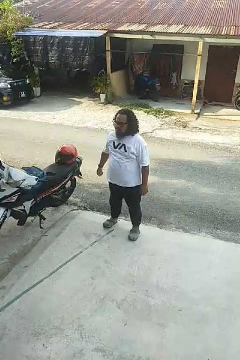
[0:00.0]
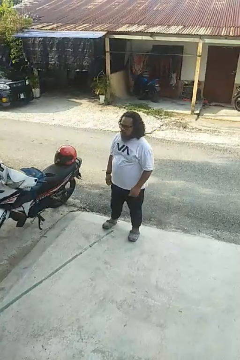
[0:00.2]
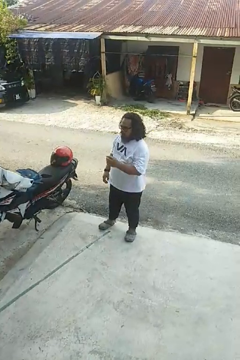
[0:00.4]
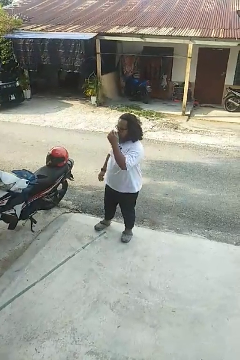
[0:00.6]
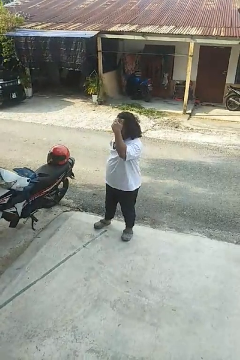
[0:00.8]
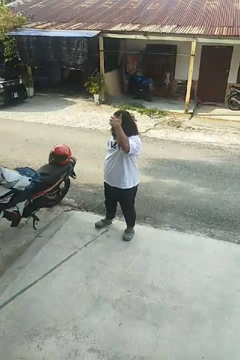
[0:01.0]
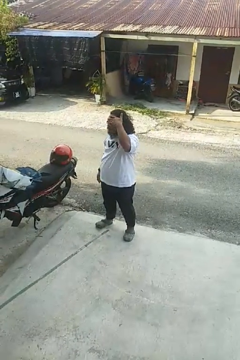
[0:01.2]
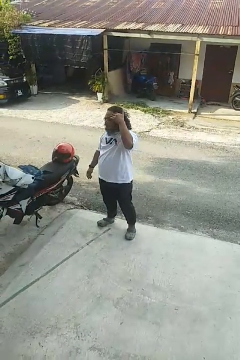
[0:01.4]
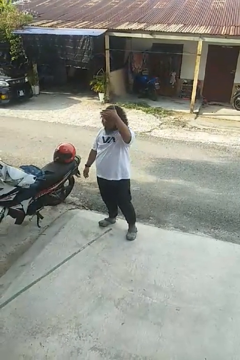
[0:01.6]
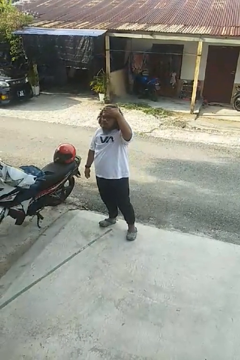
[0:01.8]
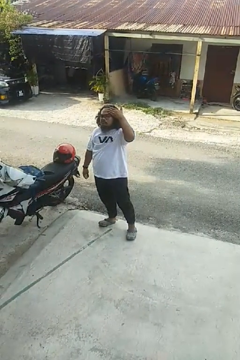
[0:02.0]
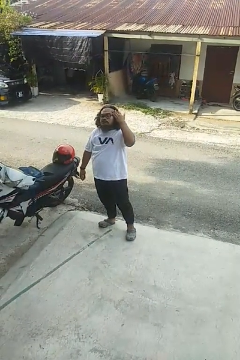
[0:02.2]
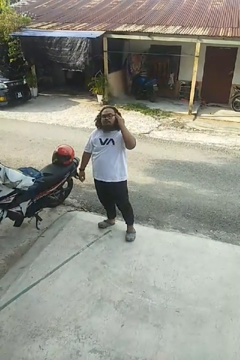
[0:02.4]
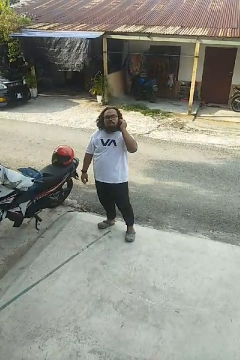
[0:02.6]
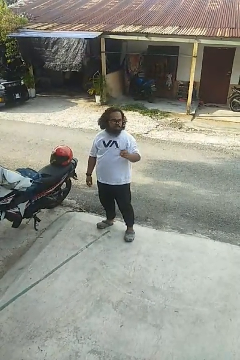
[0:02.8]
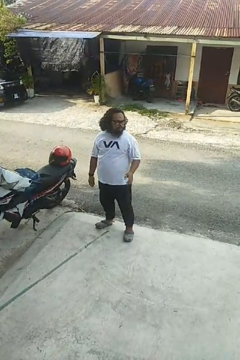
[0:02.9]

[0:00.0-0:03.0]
person scratches face

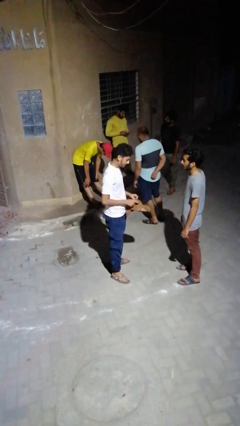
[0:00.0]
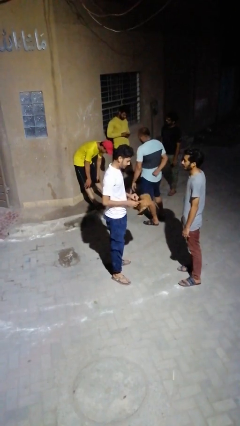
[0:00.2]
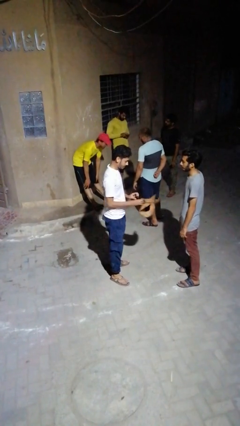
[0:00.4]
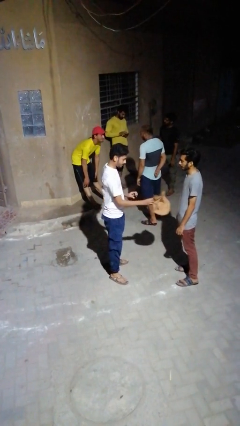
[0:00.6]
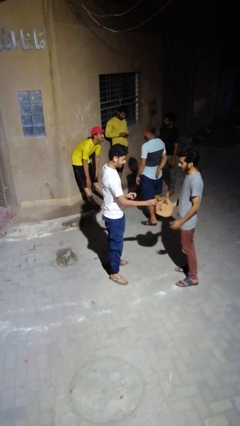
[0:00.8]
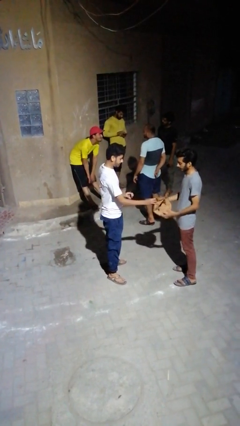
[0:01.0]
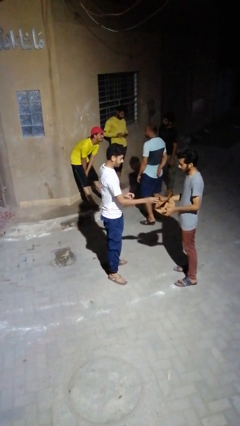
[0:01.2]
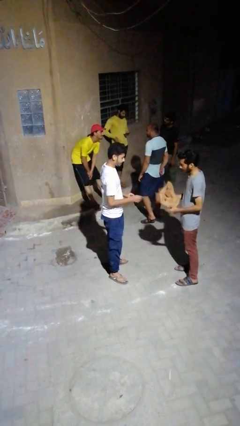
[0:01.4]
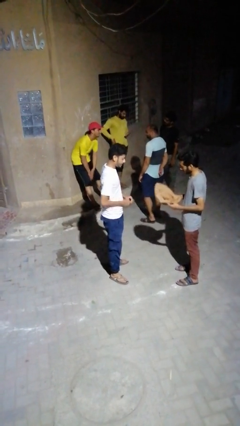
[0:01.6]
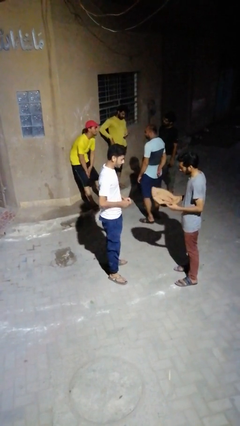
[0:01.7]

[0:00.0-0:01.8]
person transfers object to person

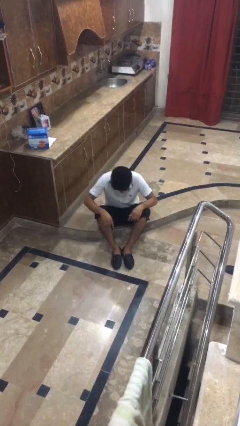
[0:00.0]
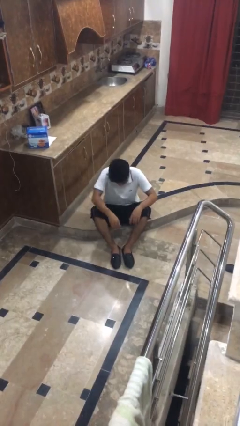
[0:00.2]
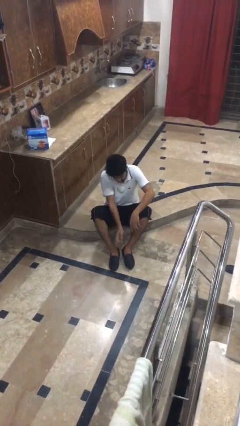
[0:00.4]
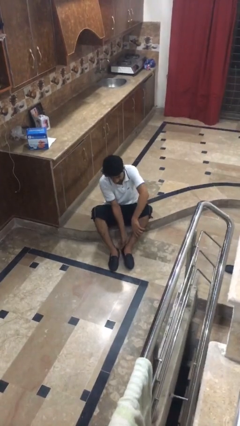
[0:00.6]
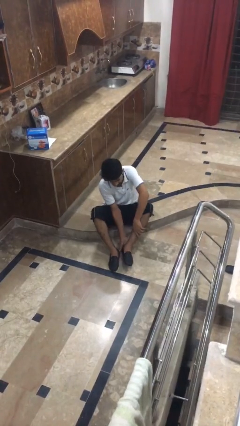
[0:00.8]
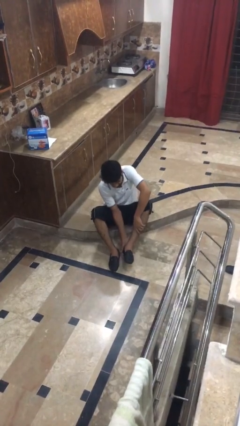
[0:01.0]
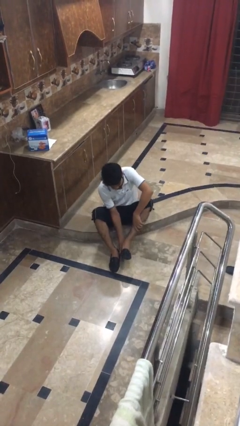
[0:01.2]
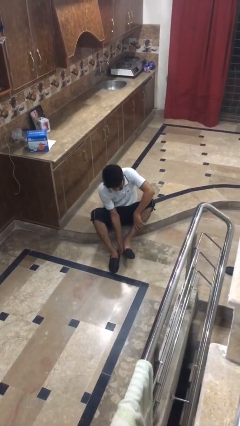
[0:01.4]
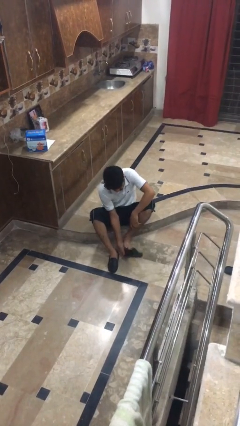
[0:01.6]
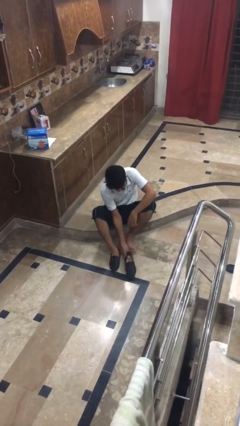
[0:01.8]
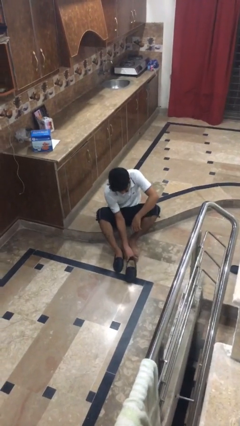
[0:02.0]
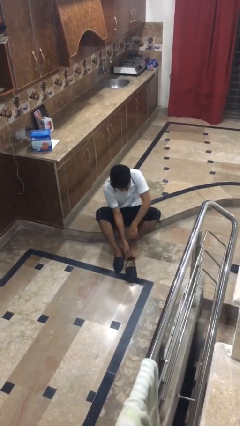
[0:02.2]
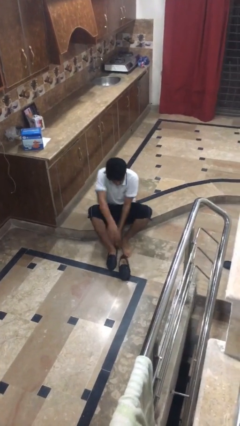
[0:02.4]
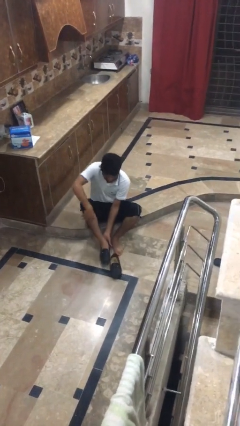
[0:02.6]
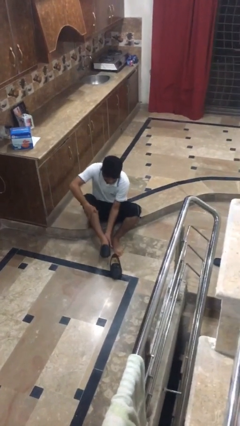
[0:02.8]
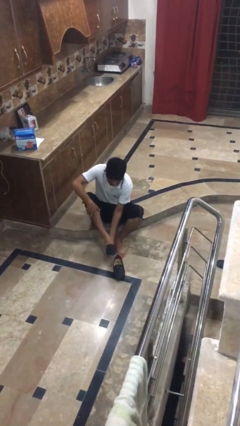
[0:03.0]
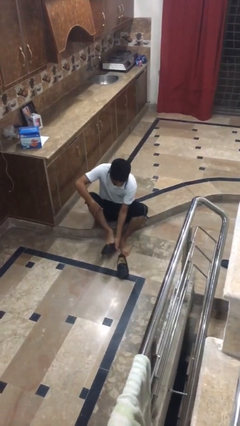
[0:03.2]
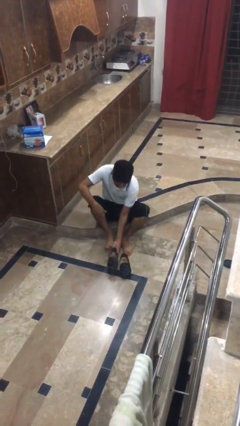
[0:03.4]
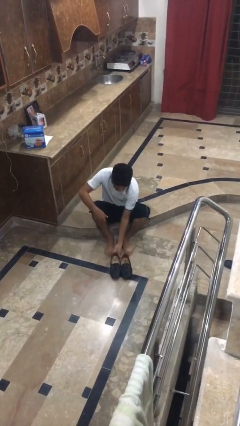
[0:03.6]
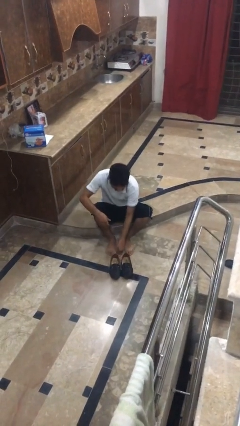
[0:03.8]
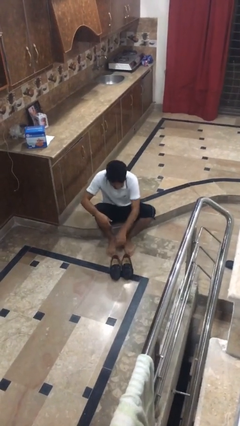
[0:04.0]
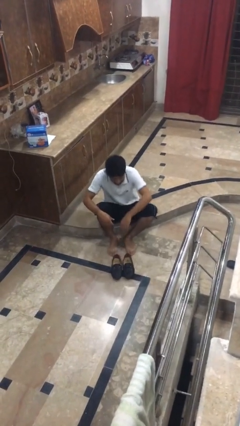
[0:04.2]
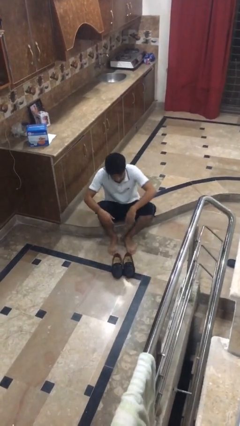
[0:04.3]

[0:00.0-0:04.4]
person takes off boots

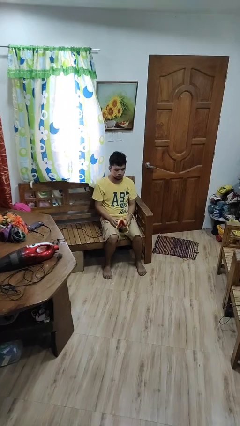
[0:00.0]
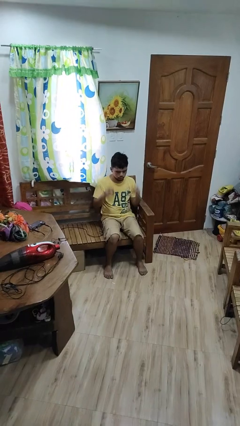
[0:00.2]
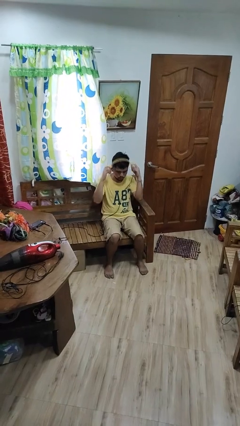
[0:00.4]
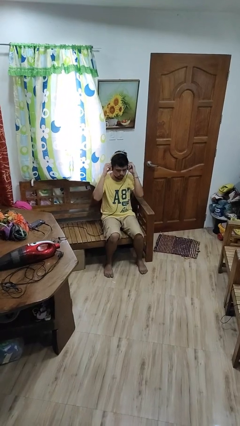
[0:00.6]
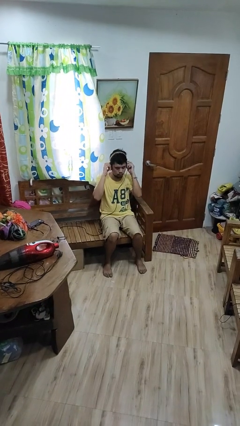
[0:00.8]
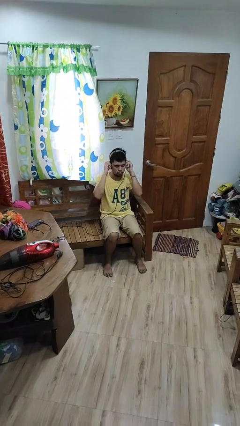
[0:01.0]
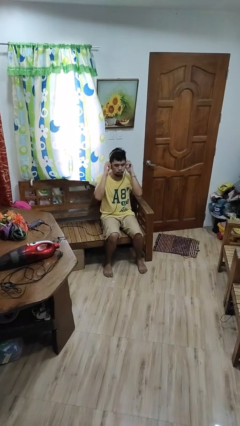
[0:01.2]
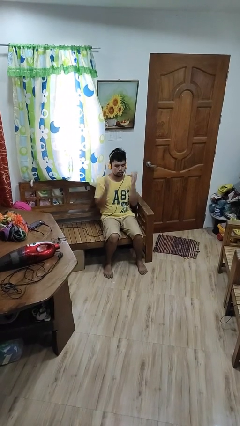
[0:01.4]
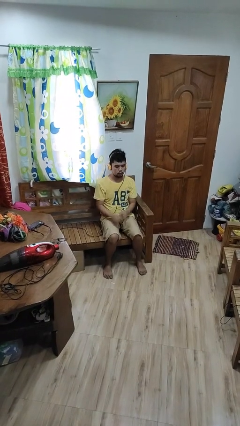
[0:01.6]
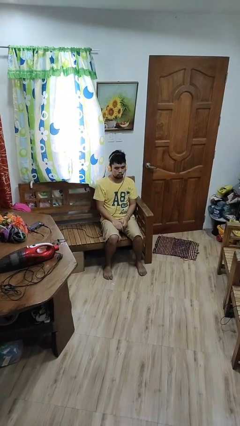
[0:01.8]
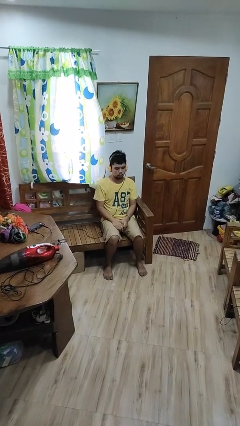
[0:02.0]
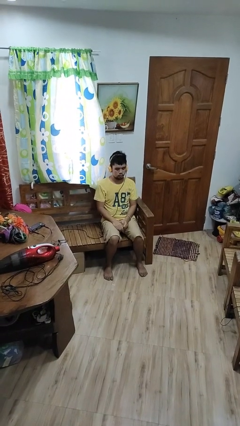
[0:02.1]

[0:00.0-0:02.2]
person puts on headphones

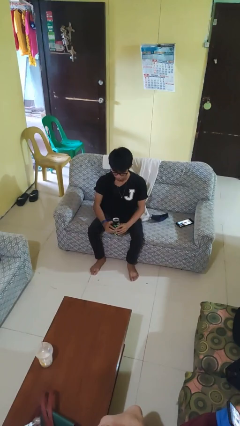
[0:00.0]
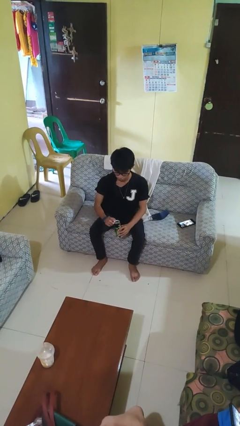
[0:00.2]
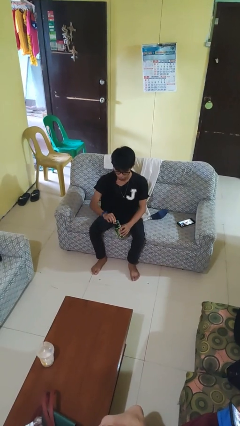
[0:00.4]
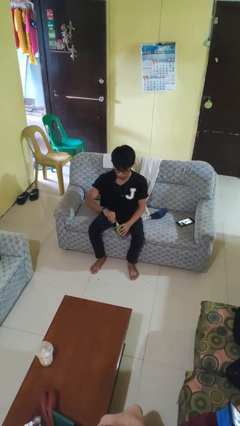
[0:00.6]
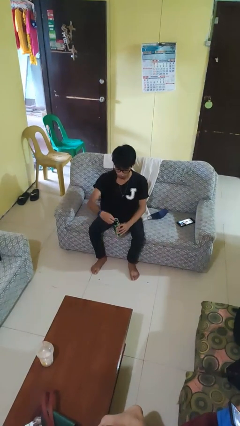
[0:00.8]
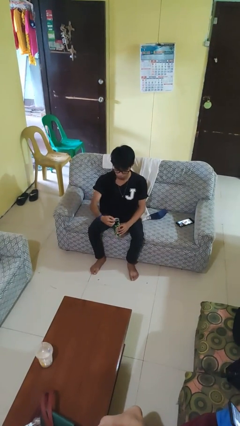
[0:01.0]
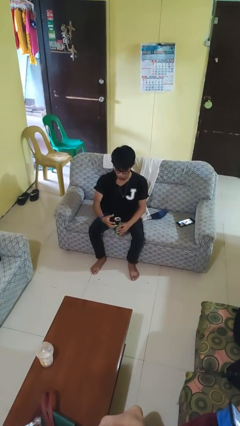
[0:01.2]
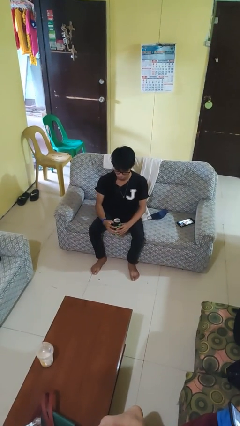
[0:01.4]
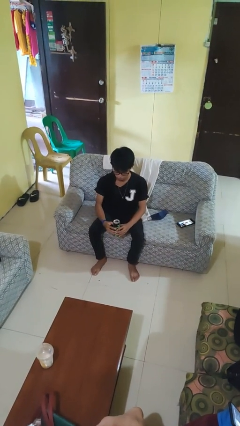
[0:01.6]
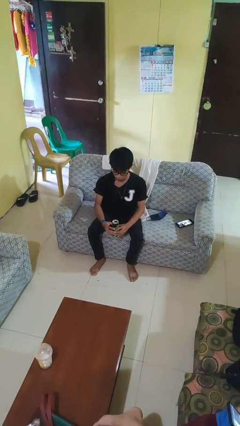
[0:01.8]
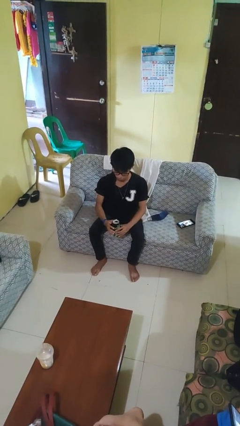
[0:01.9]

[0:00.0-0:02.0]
person opens beverage can

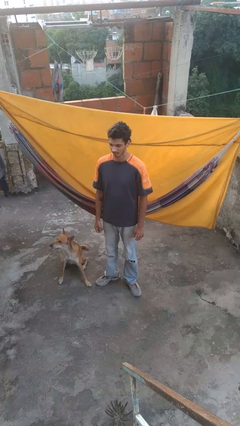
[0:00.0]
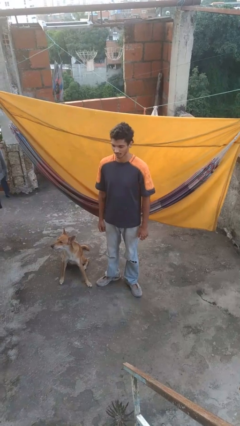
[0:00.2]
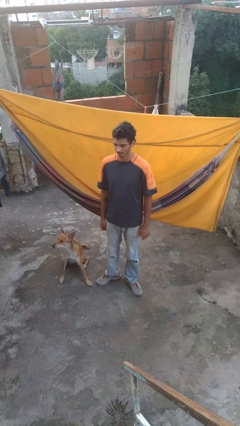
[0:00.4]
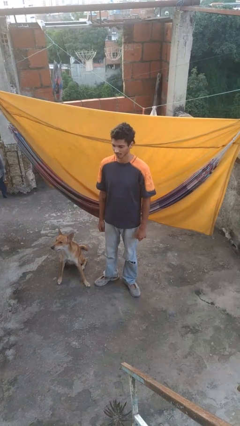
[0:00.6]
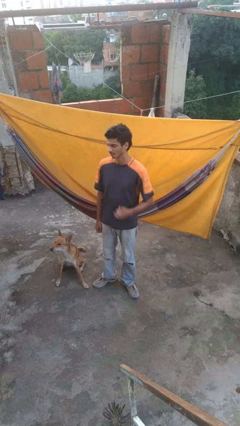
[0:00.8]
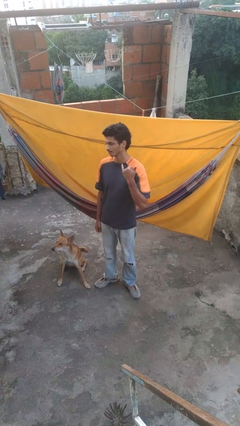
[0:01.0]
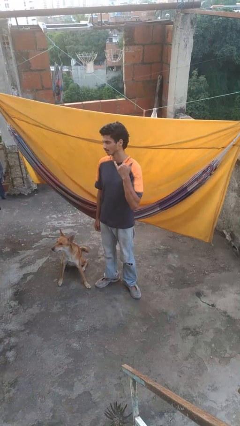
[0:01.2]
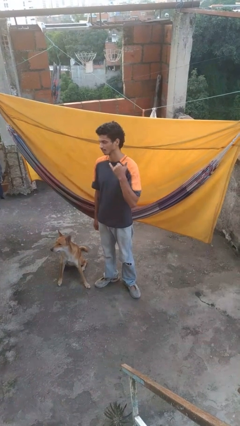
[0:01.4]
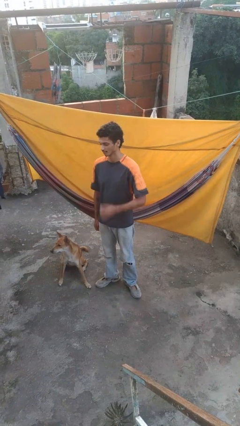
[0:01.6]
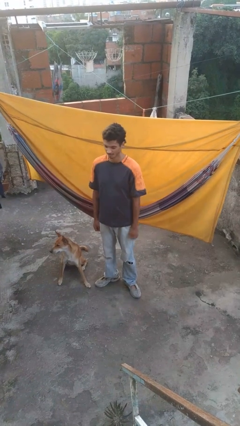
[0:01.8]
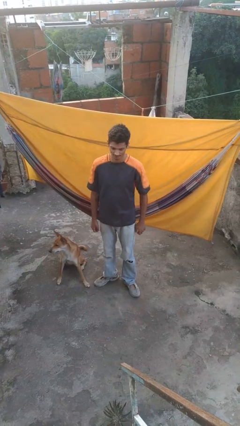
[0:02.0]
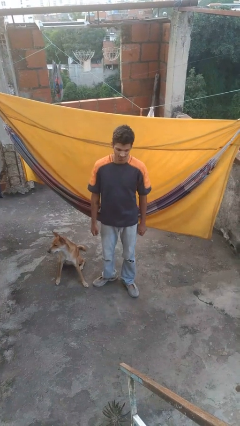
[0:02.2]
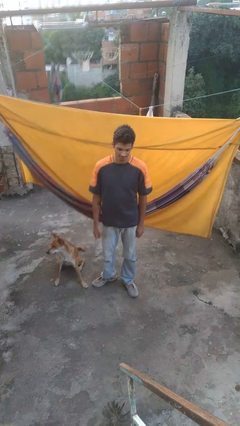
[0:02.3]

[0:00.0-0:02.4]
person gestures hang loose

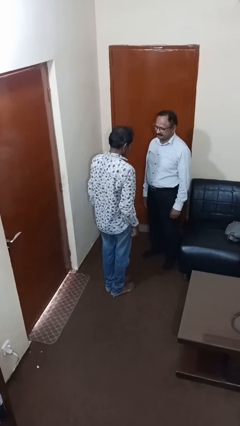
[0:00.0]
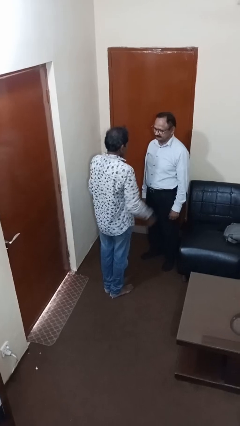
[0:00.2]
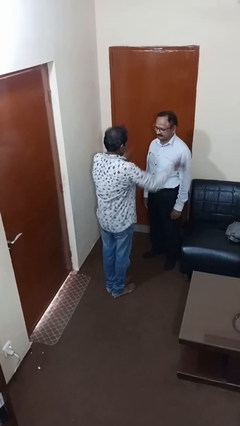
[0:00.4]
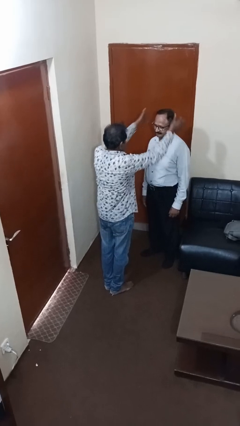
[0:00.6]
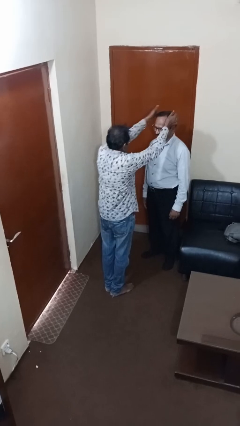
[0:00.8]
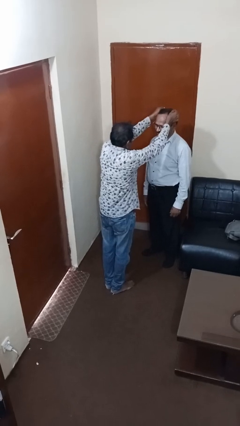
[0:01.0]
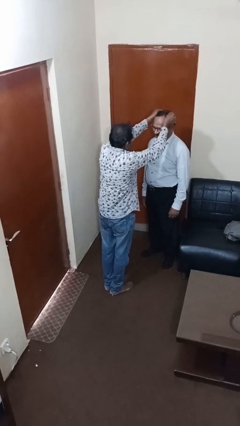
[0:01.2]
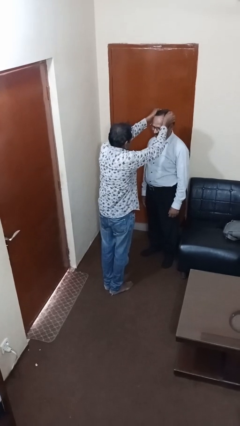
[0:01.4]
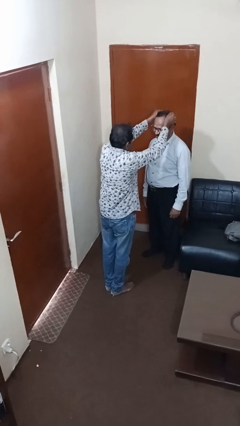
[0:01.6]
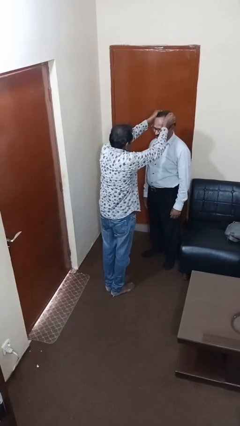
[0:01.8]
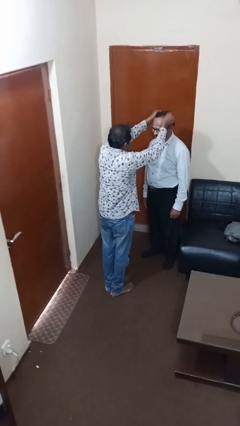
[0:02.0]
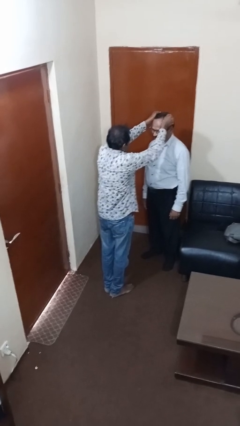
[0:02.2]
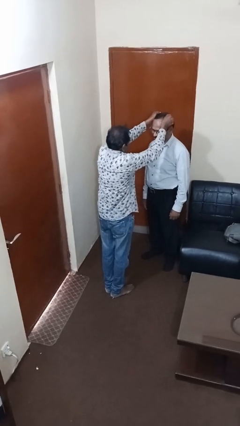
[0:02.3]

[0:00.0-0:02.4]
person grabs person by hair
